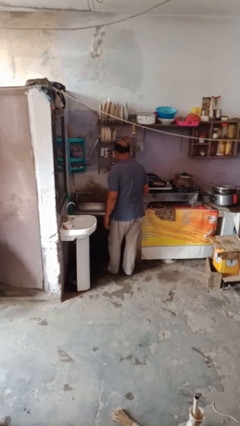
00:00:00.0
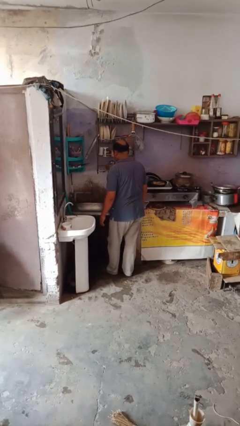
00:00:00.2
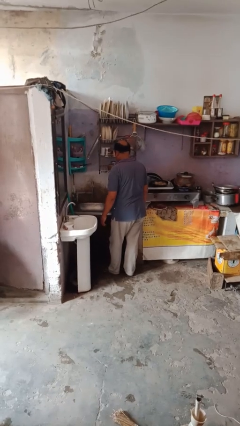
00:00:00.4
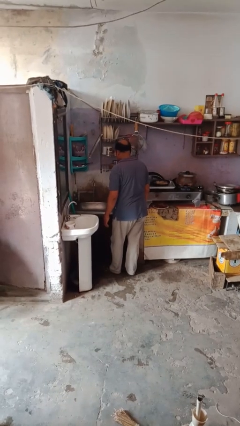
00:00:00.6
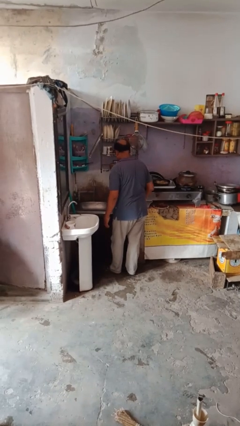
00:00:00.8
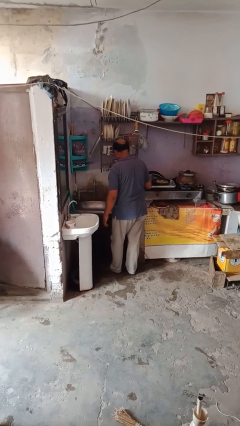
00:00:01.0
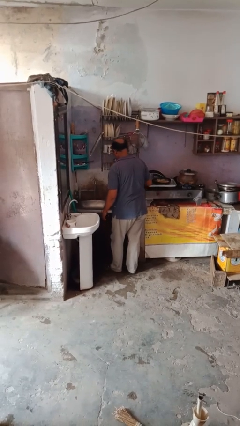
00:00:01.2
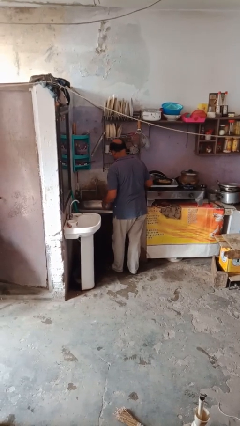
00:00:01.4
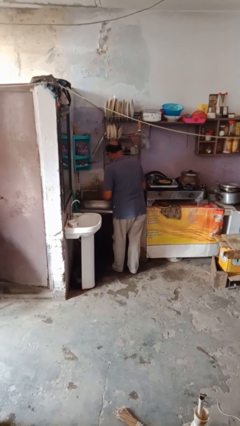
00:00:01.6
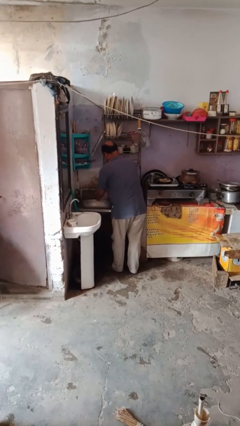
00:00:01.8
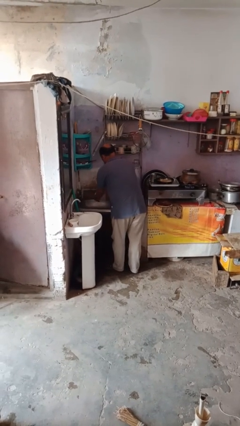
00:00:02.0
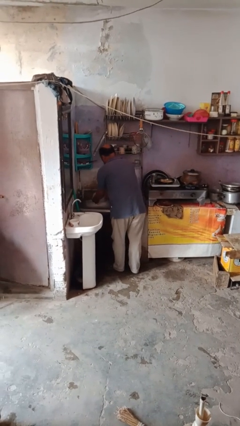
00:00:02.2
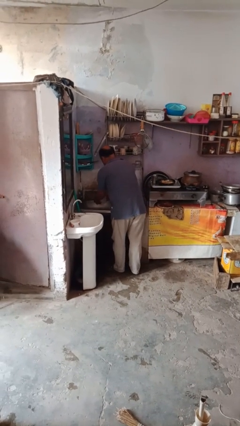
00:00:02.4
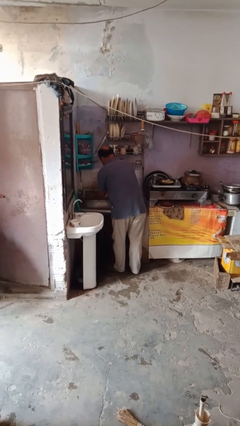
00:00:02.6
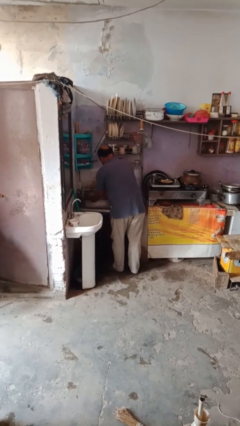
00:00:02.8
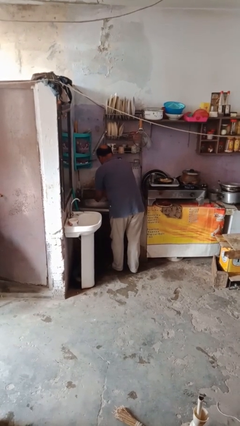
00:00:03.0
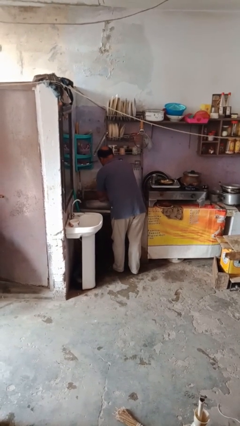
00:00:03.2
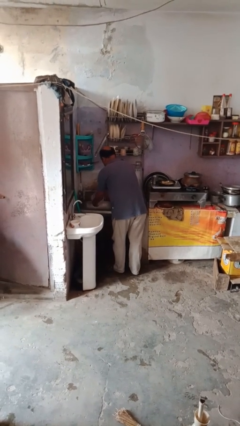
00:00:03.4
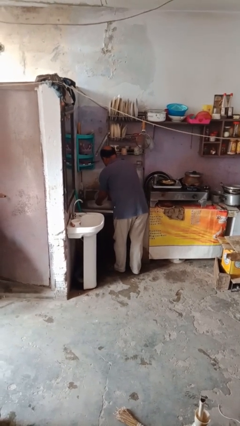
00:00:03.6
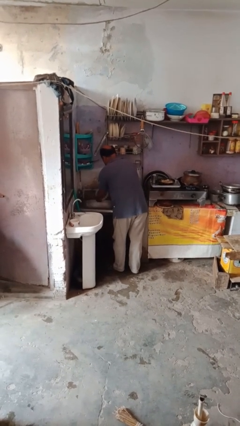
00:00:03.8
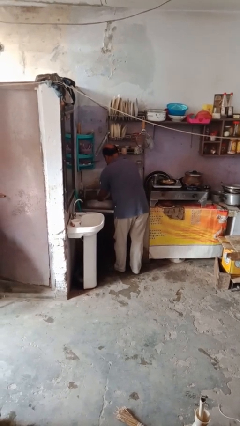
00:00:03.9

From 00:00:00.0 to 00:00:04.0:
person washes dish

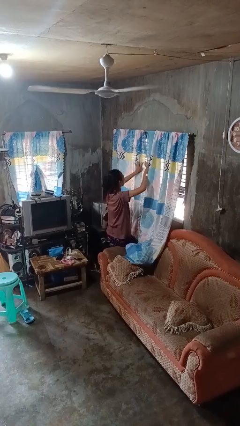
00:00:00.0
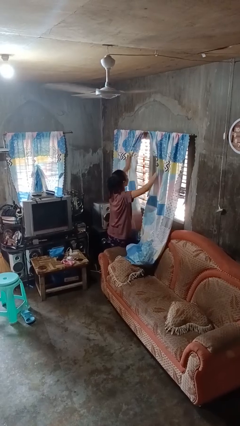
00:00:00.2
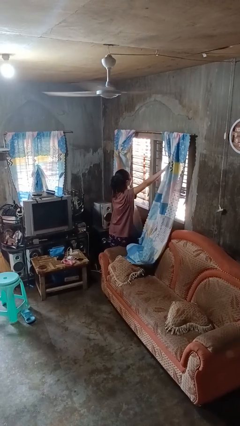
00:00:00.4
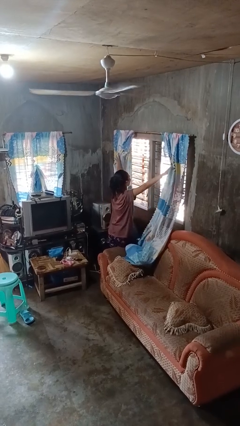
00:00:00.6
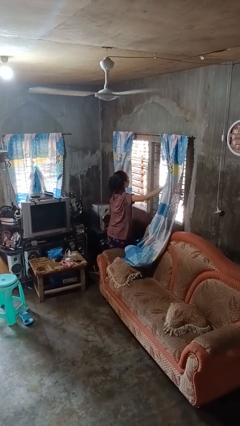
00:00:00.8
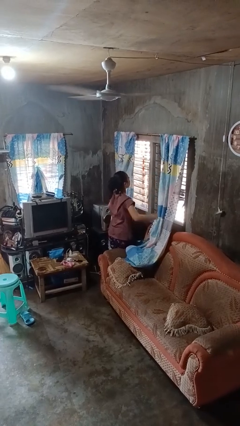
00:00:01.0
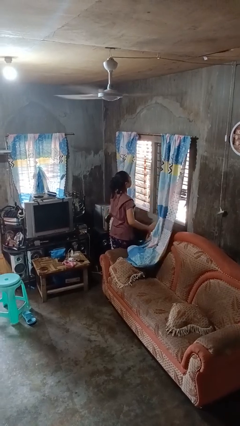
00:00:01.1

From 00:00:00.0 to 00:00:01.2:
person opens curtains

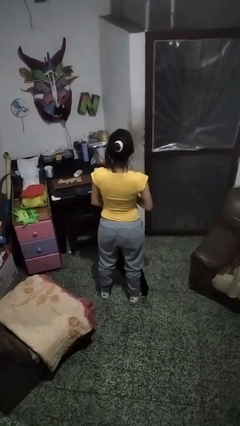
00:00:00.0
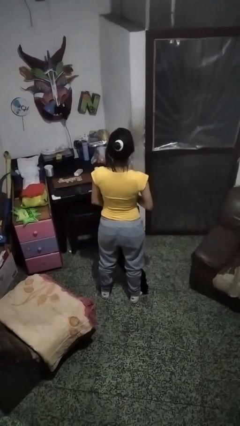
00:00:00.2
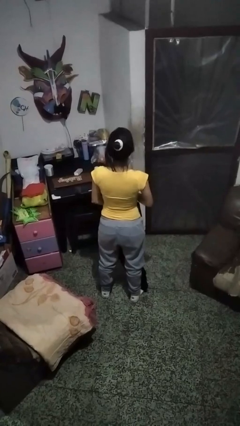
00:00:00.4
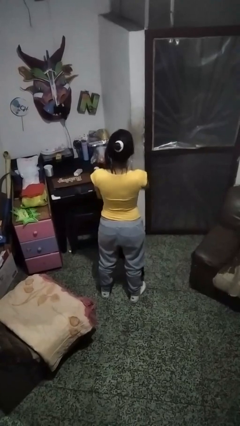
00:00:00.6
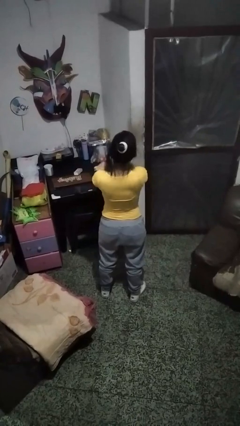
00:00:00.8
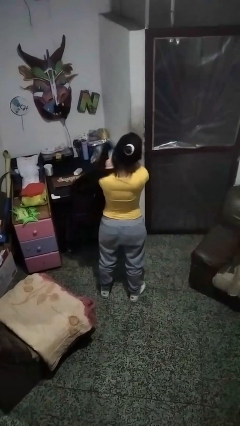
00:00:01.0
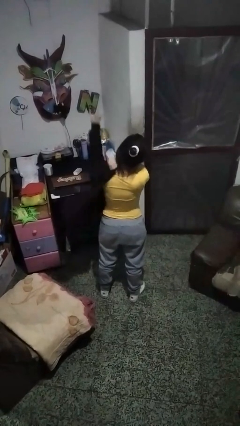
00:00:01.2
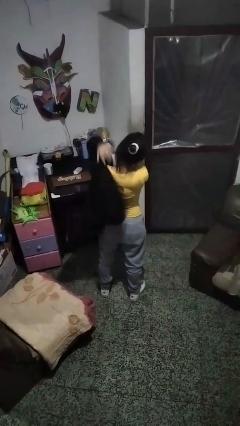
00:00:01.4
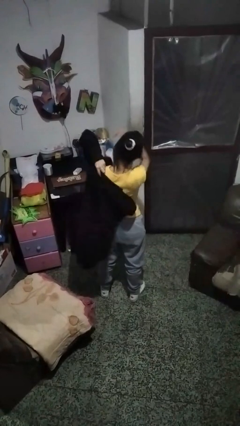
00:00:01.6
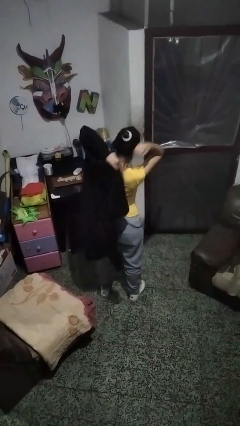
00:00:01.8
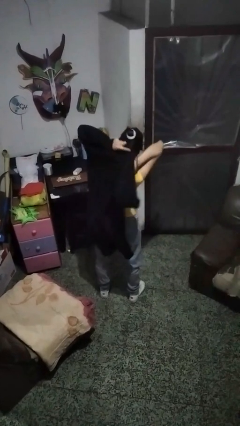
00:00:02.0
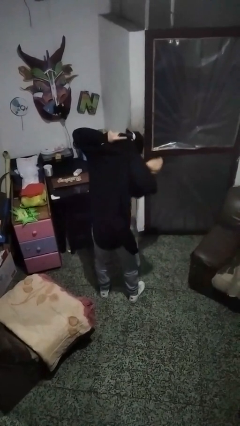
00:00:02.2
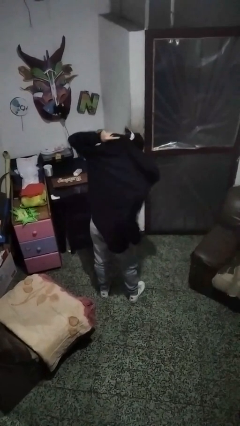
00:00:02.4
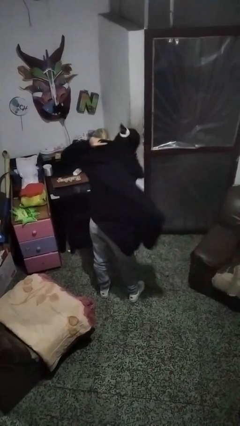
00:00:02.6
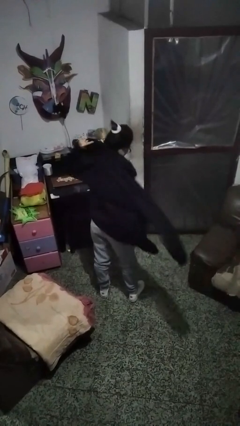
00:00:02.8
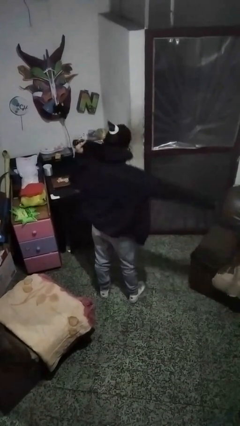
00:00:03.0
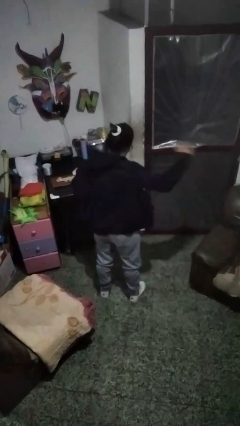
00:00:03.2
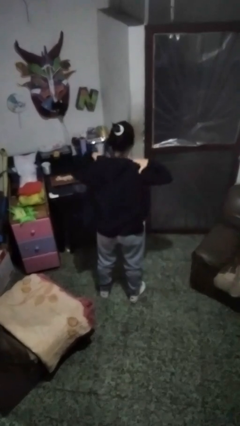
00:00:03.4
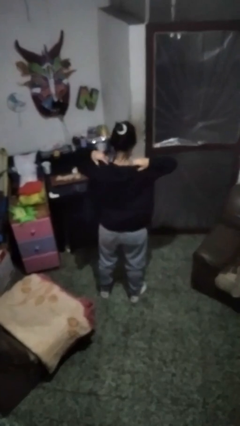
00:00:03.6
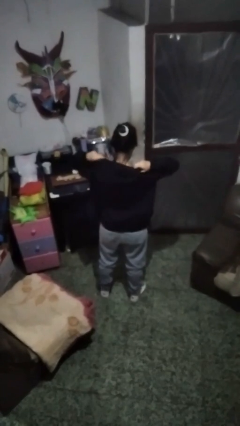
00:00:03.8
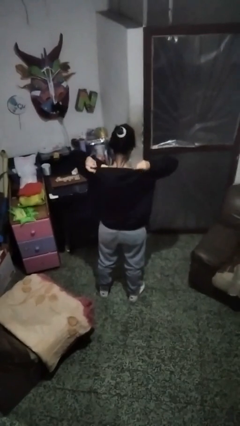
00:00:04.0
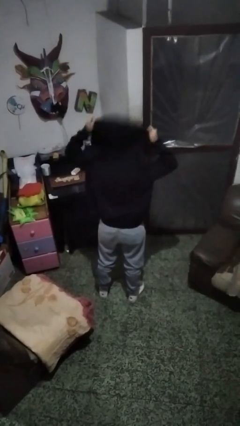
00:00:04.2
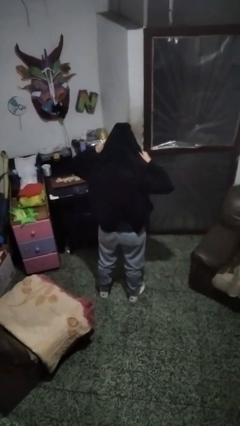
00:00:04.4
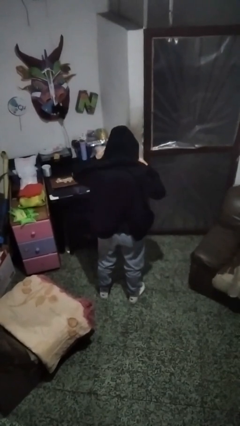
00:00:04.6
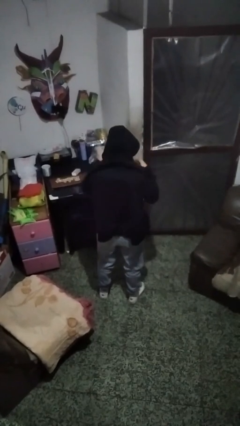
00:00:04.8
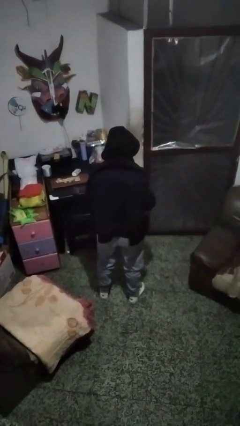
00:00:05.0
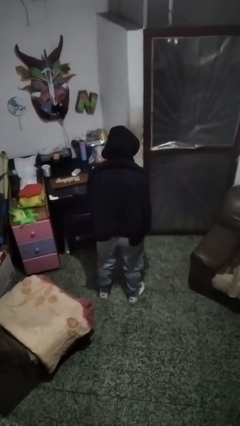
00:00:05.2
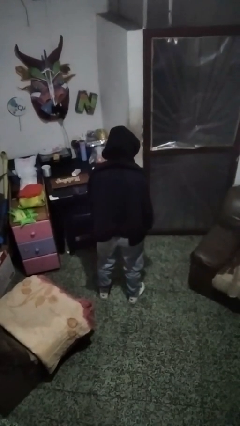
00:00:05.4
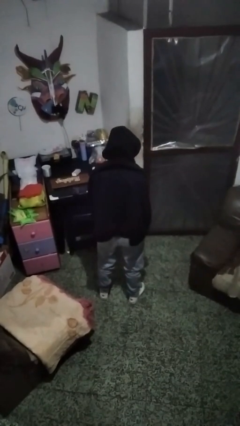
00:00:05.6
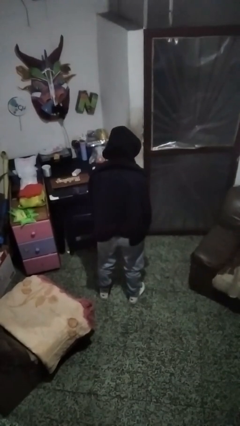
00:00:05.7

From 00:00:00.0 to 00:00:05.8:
person puts on hoodie

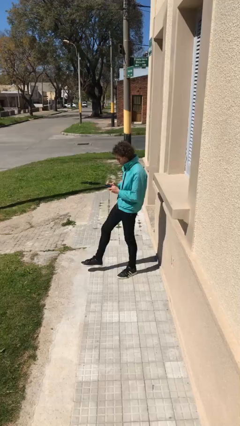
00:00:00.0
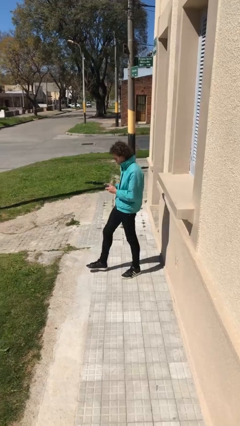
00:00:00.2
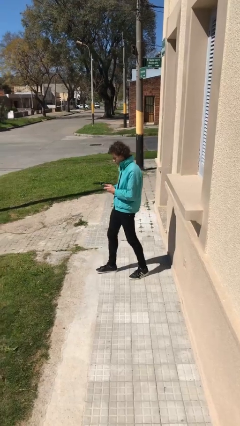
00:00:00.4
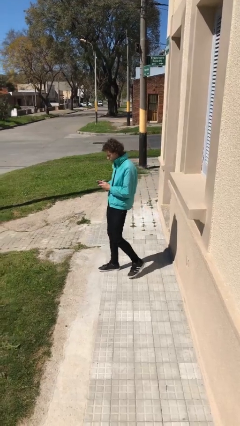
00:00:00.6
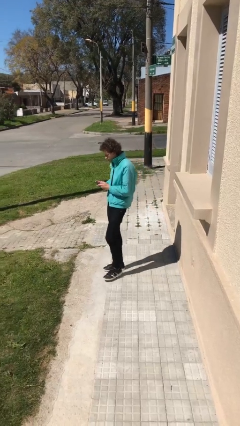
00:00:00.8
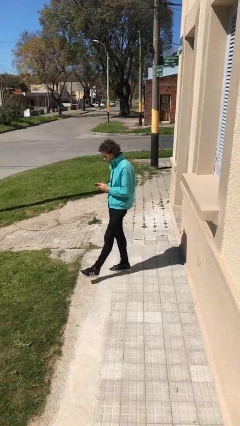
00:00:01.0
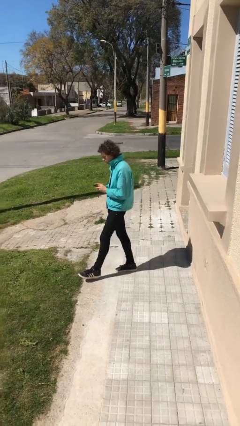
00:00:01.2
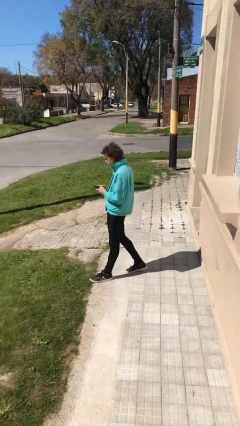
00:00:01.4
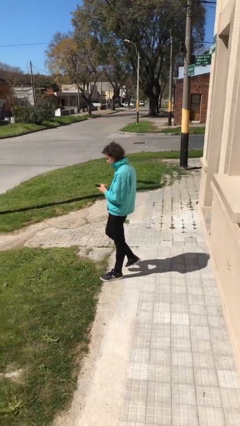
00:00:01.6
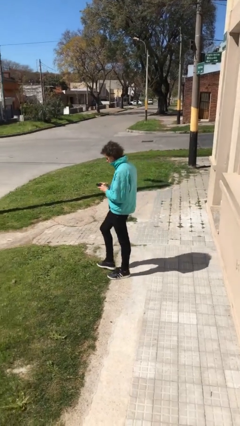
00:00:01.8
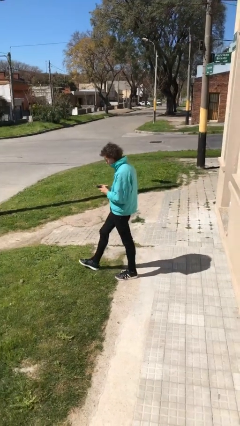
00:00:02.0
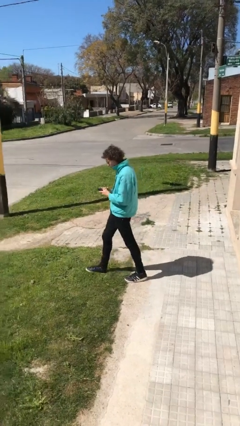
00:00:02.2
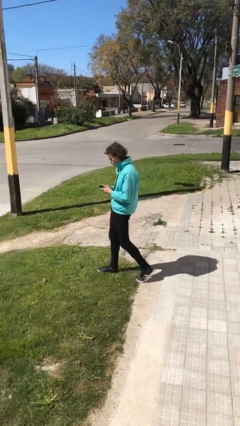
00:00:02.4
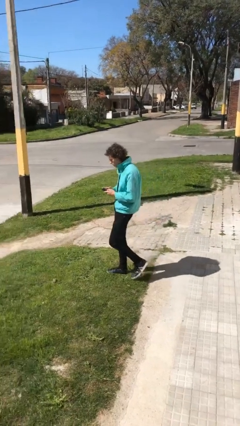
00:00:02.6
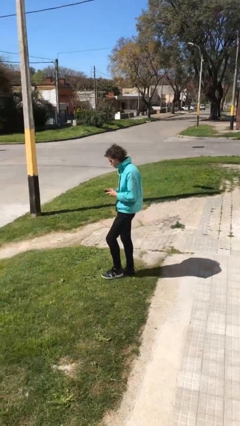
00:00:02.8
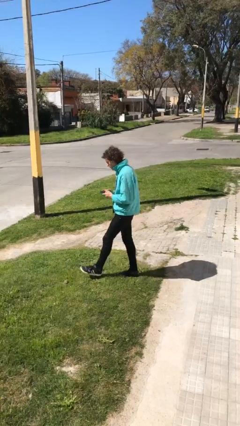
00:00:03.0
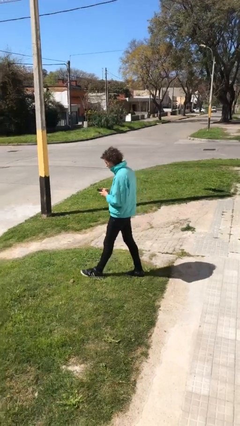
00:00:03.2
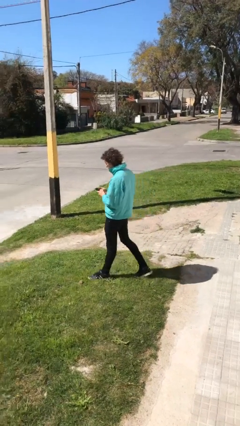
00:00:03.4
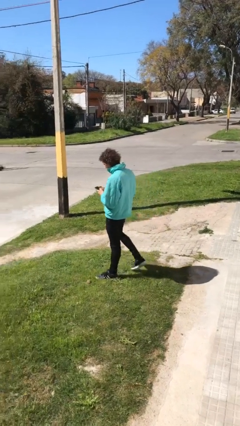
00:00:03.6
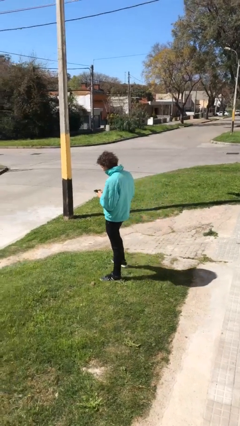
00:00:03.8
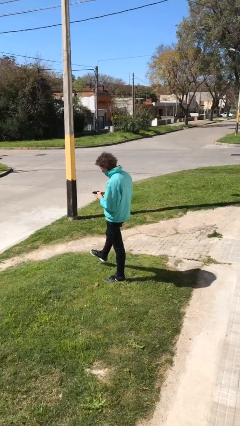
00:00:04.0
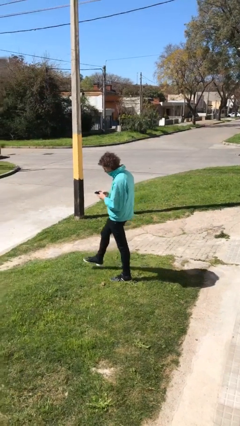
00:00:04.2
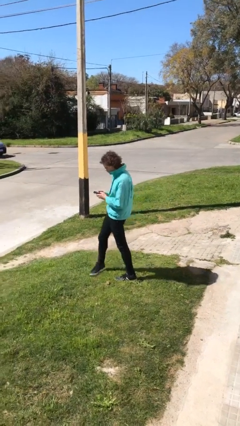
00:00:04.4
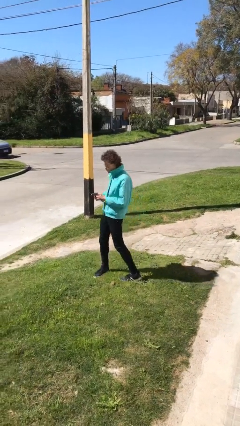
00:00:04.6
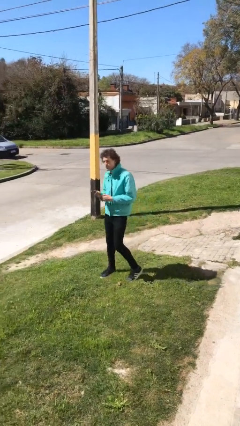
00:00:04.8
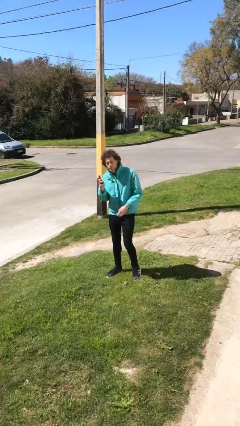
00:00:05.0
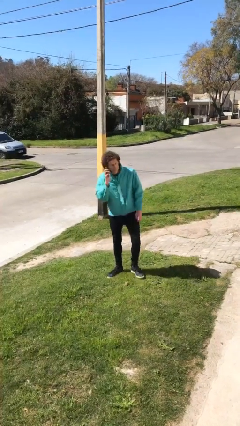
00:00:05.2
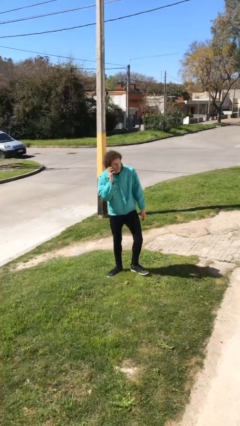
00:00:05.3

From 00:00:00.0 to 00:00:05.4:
person texts on phone

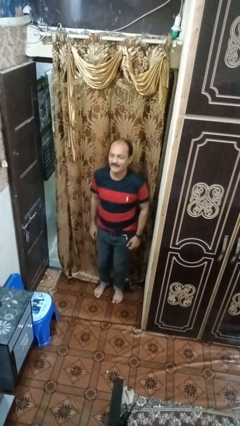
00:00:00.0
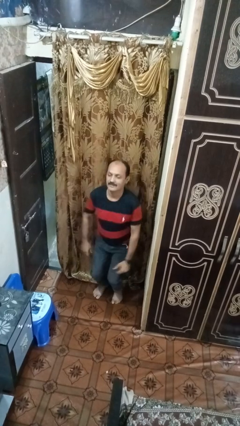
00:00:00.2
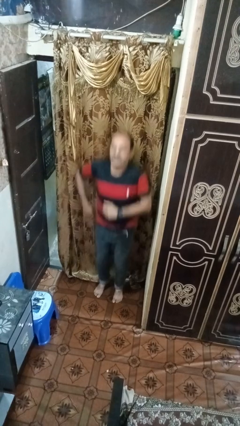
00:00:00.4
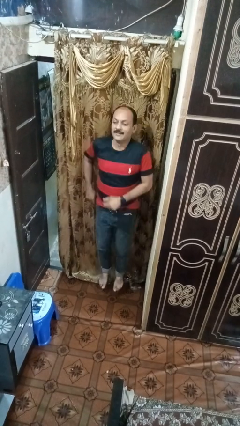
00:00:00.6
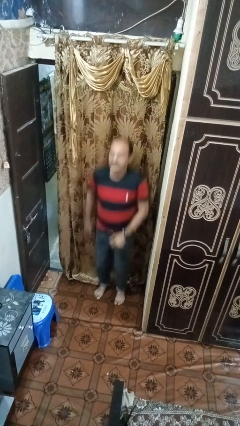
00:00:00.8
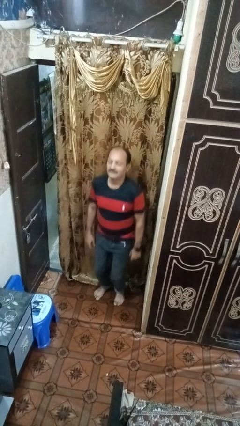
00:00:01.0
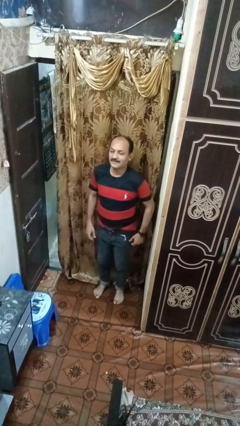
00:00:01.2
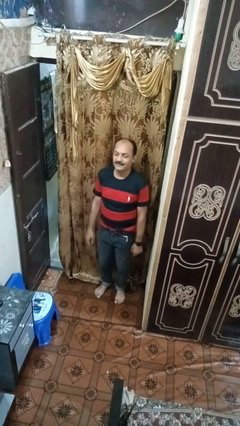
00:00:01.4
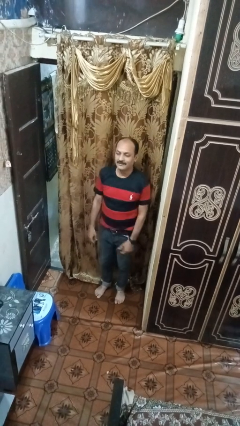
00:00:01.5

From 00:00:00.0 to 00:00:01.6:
person jumps
